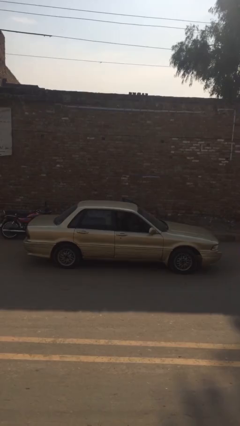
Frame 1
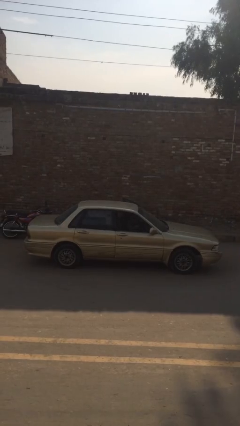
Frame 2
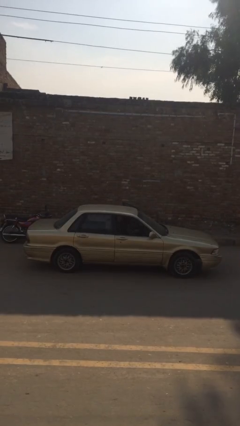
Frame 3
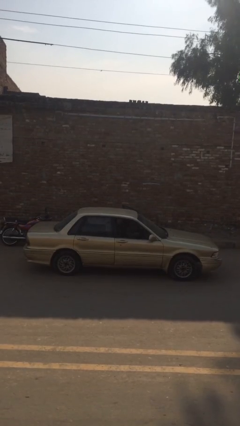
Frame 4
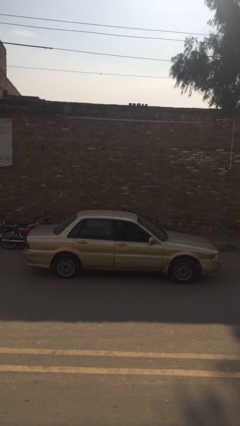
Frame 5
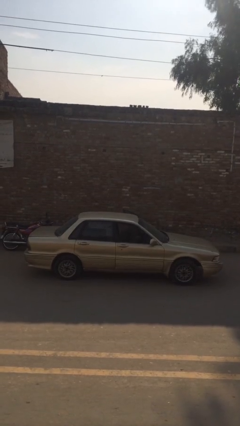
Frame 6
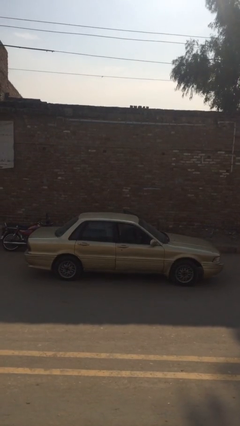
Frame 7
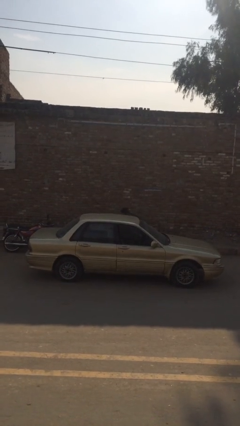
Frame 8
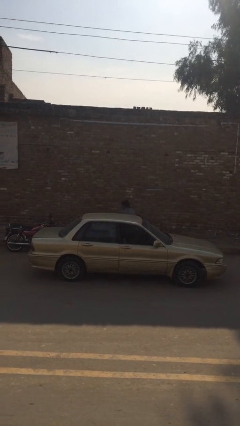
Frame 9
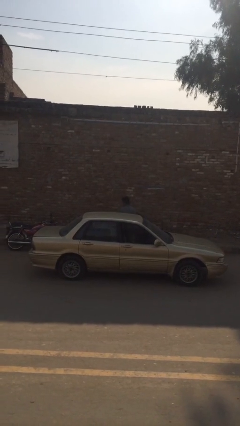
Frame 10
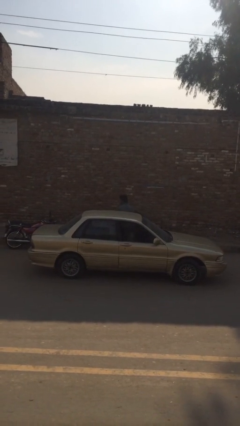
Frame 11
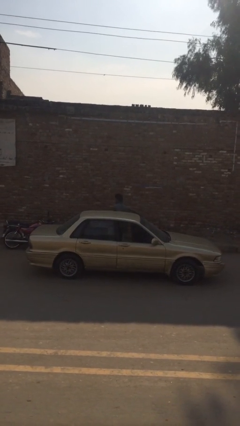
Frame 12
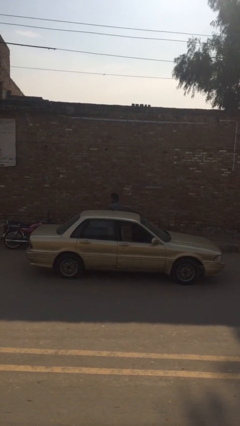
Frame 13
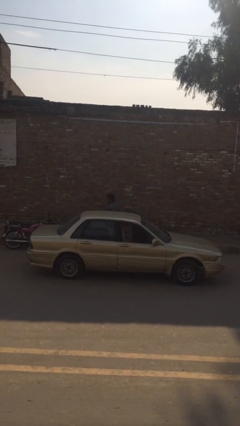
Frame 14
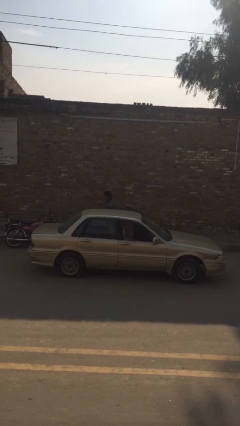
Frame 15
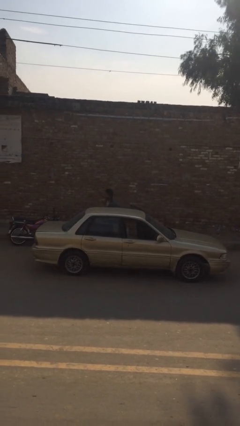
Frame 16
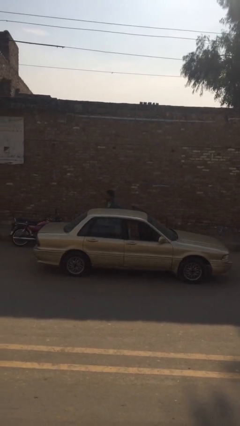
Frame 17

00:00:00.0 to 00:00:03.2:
person exits car

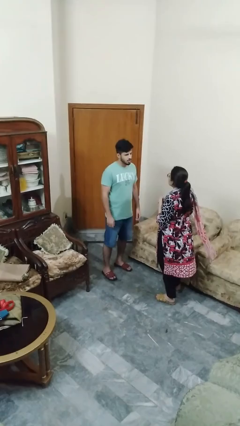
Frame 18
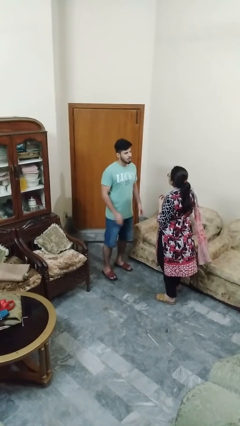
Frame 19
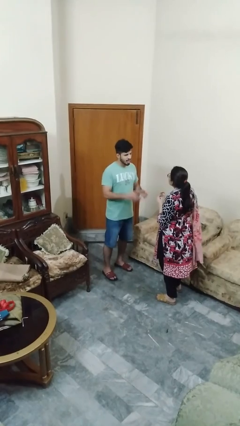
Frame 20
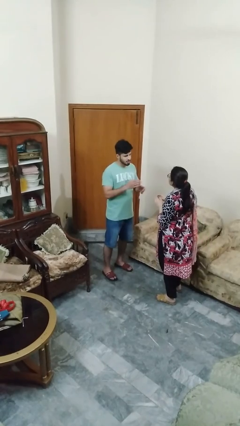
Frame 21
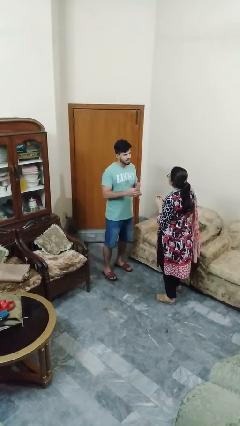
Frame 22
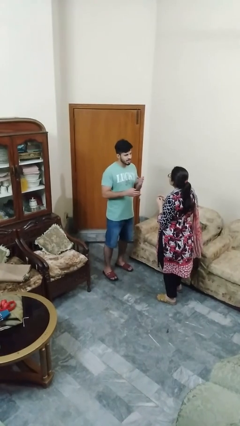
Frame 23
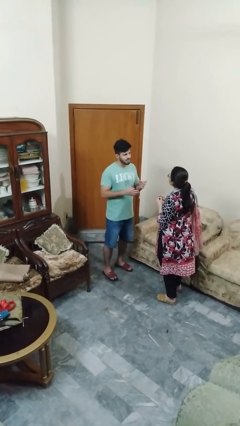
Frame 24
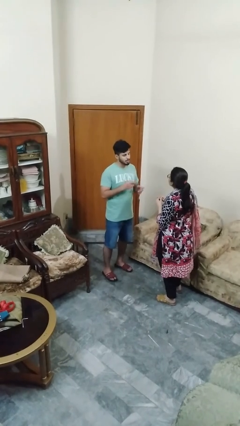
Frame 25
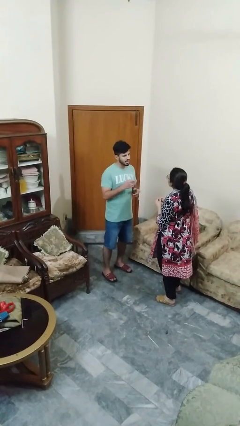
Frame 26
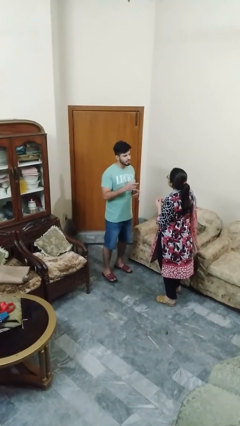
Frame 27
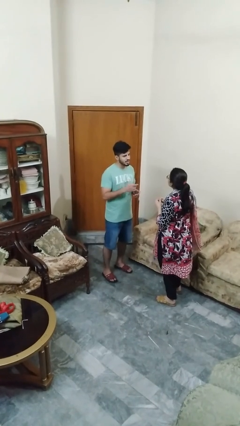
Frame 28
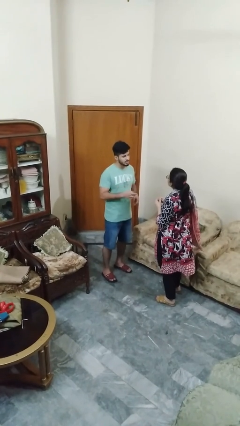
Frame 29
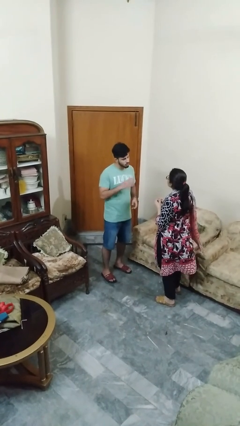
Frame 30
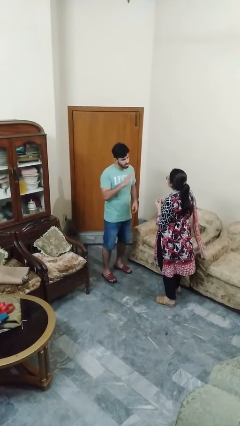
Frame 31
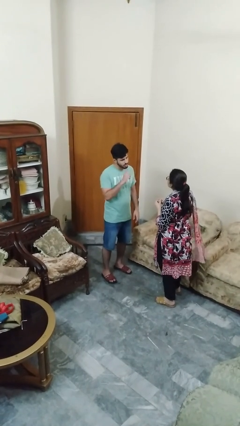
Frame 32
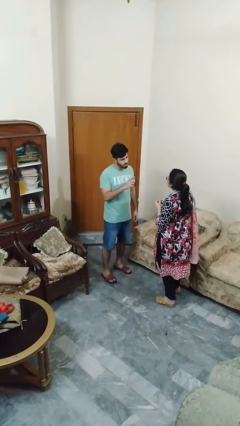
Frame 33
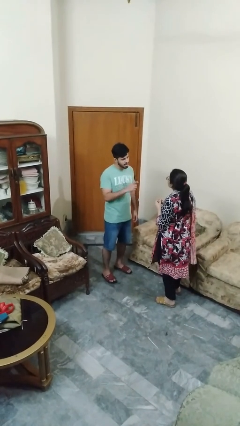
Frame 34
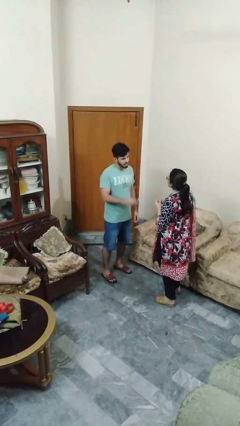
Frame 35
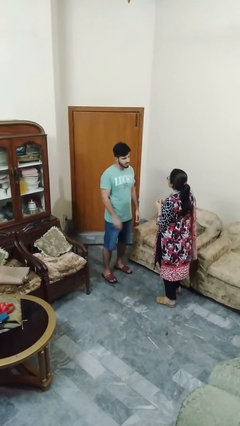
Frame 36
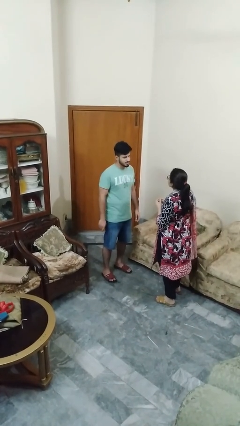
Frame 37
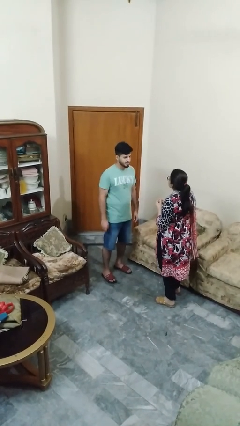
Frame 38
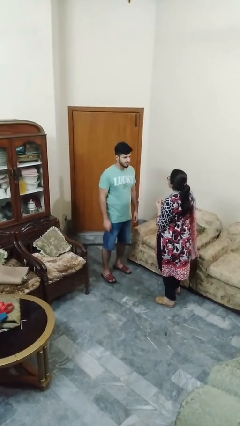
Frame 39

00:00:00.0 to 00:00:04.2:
person talks to person

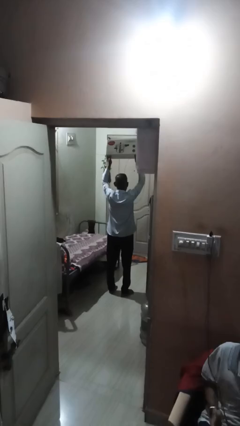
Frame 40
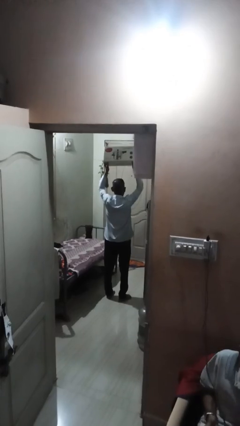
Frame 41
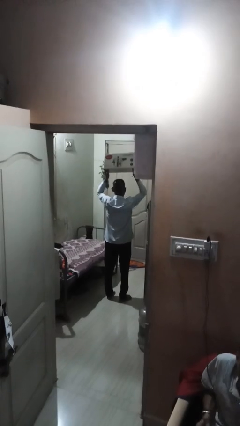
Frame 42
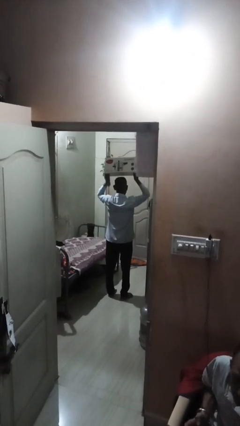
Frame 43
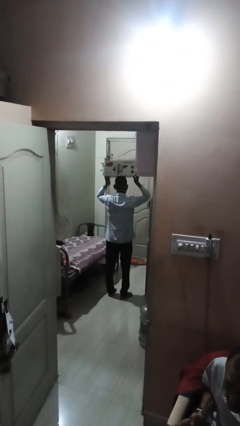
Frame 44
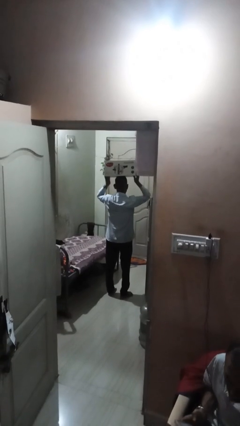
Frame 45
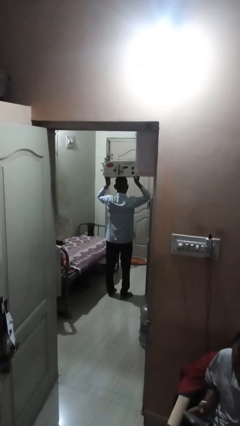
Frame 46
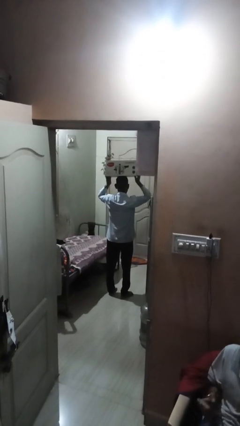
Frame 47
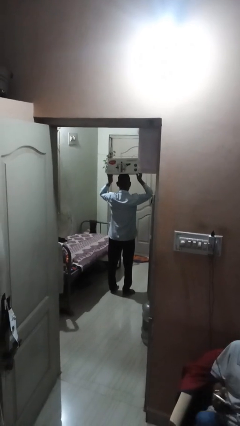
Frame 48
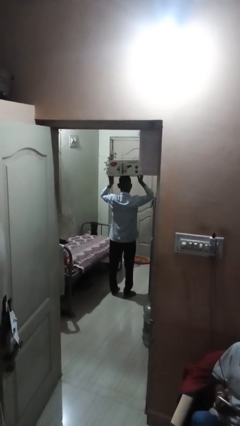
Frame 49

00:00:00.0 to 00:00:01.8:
person holds object above head

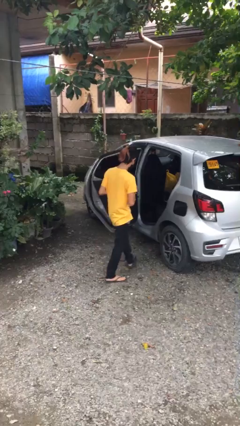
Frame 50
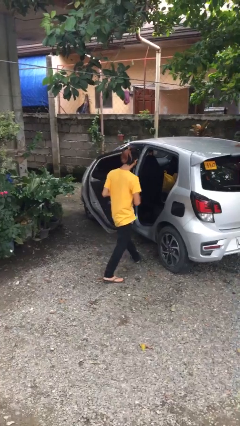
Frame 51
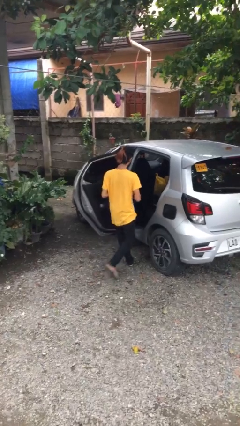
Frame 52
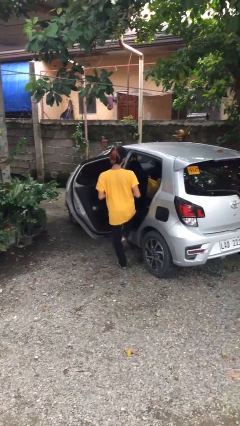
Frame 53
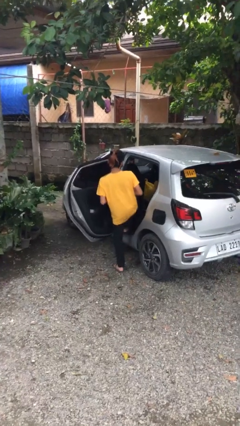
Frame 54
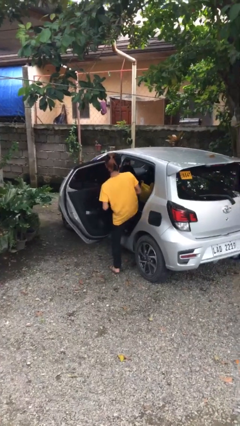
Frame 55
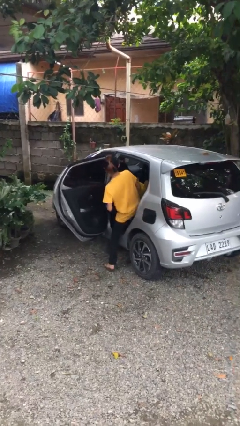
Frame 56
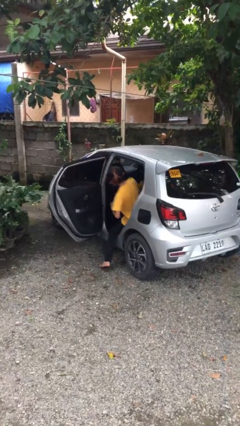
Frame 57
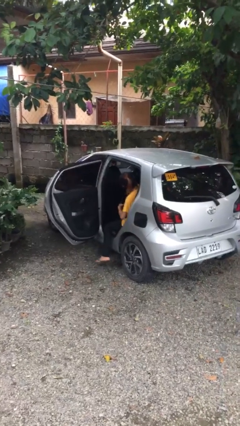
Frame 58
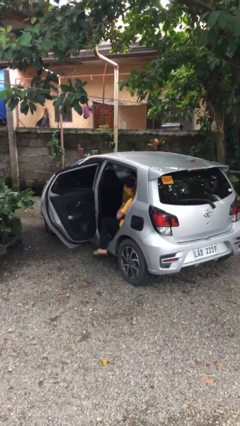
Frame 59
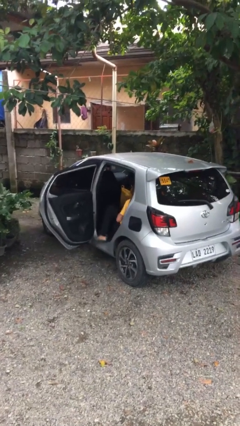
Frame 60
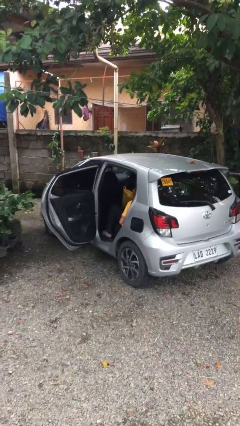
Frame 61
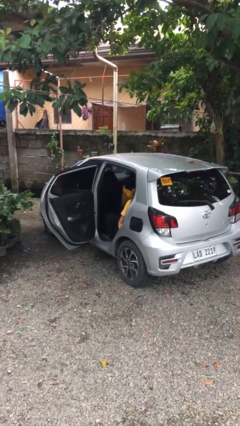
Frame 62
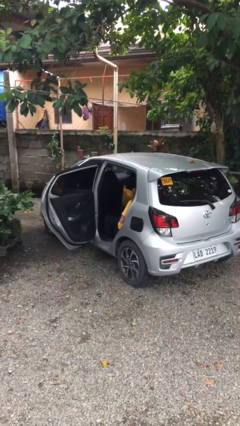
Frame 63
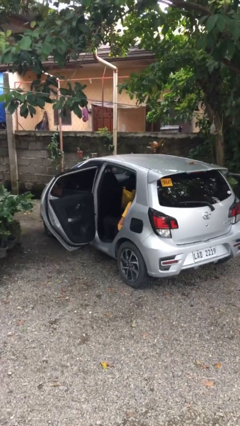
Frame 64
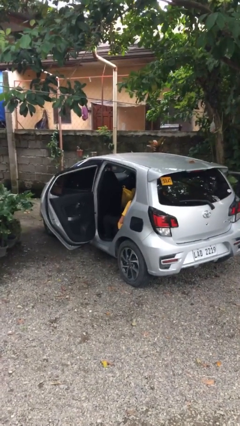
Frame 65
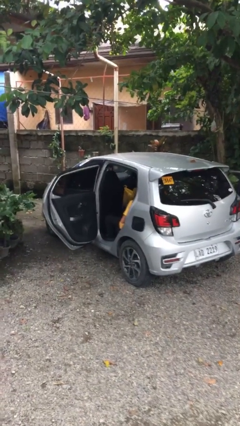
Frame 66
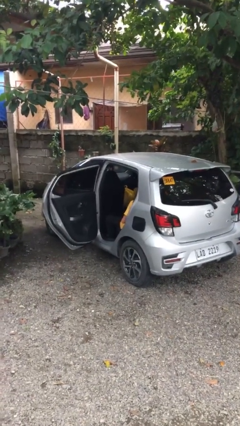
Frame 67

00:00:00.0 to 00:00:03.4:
person enters car

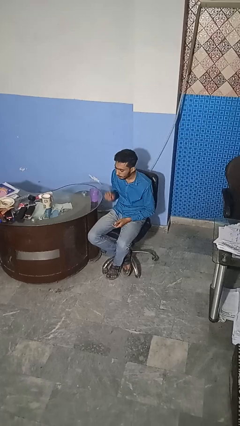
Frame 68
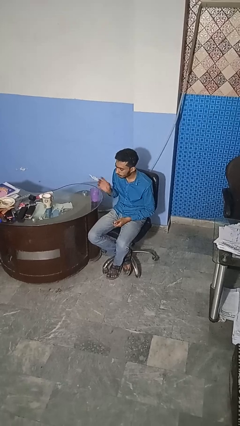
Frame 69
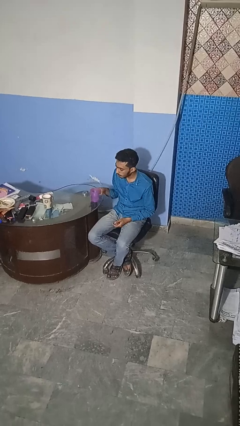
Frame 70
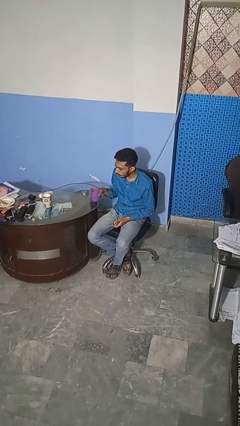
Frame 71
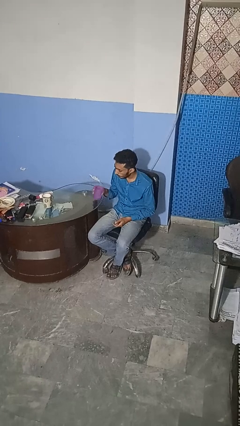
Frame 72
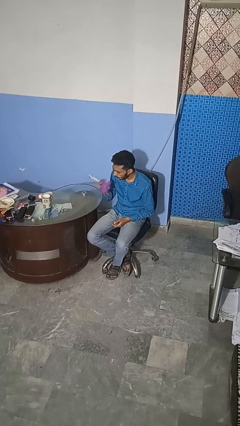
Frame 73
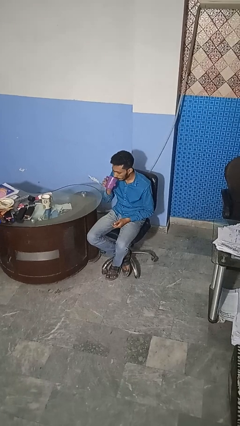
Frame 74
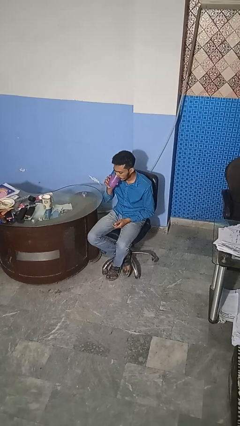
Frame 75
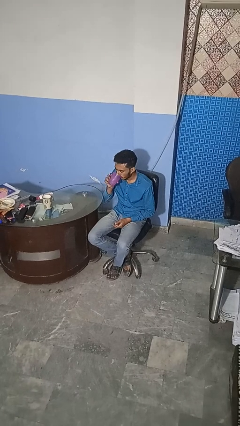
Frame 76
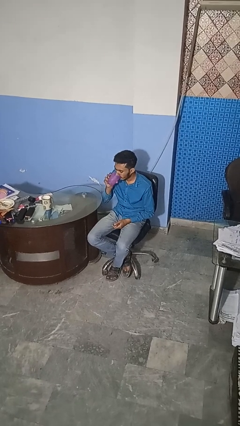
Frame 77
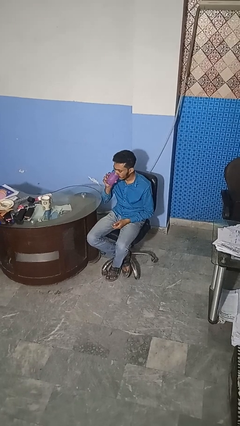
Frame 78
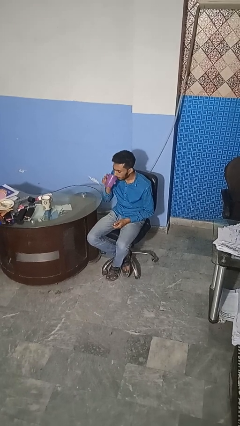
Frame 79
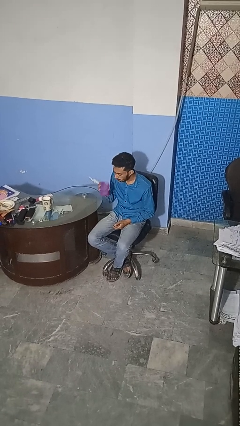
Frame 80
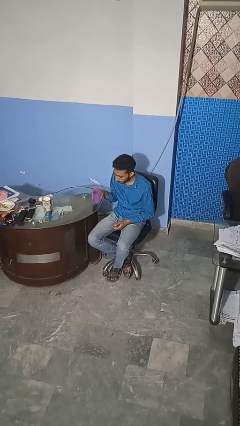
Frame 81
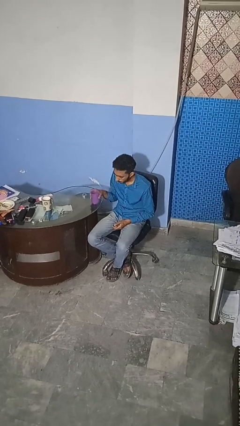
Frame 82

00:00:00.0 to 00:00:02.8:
person drinks from cup

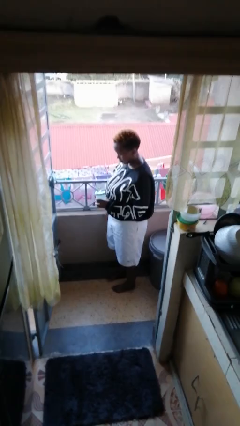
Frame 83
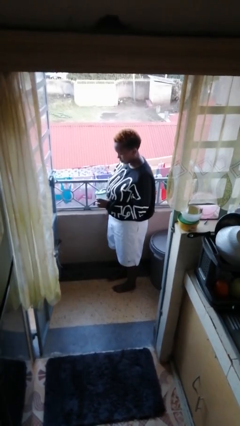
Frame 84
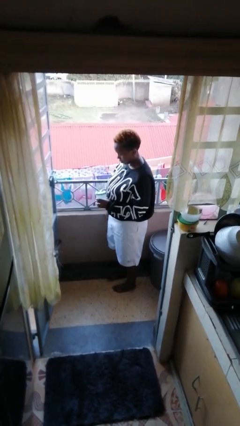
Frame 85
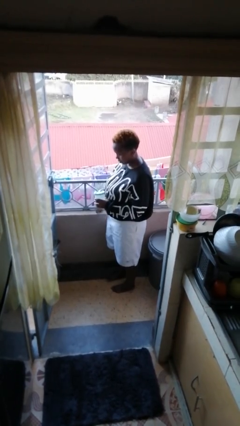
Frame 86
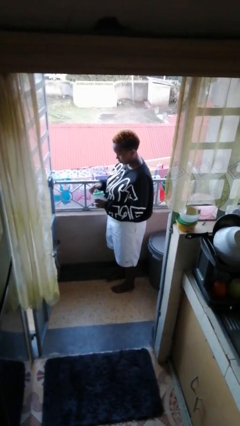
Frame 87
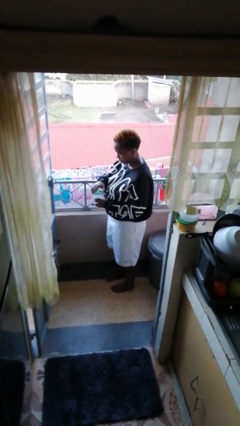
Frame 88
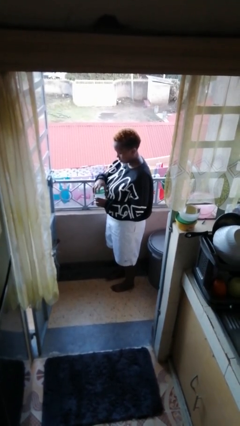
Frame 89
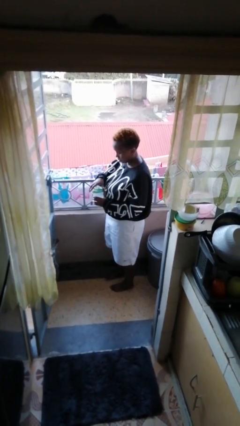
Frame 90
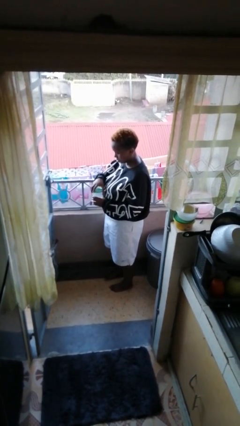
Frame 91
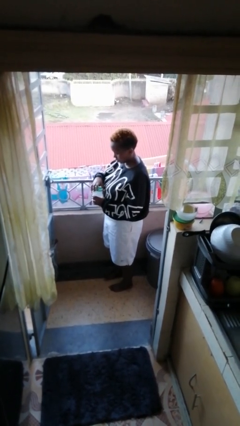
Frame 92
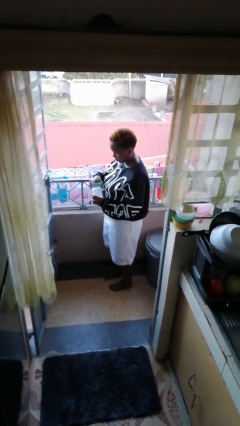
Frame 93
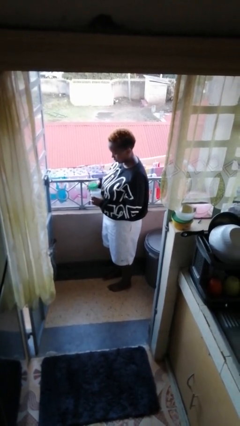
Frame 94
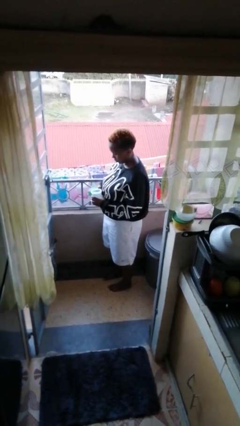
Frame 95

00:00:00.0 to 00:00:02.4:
person opens jar
